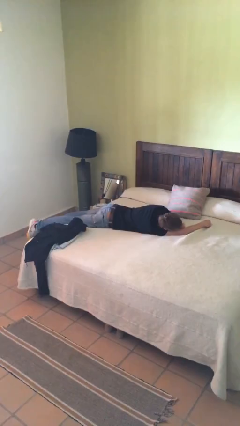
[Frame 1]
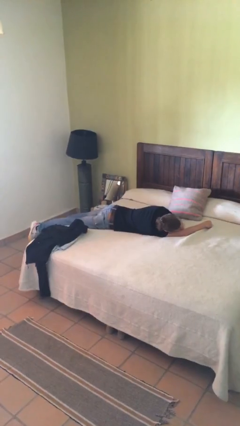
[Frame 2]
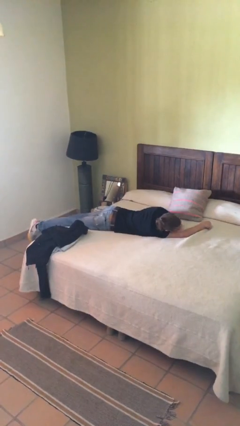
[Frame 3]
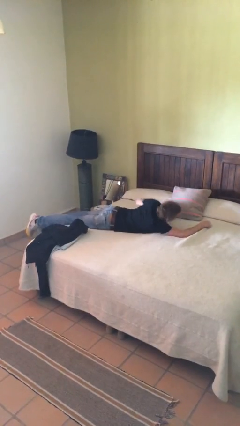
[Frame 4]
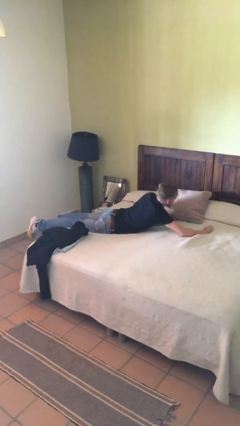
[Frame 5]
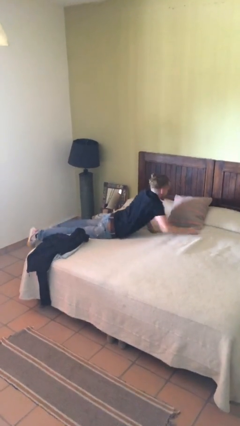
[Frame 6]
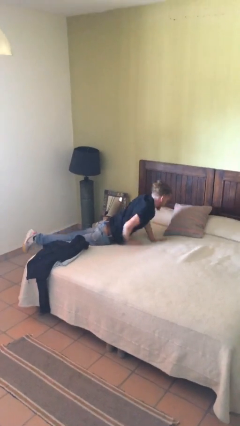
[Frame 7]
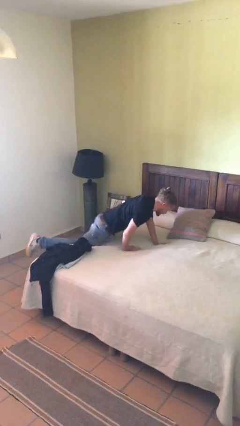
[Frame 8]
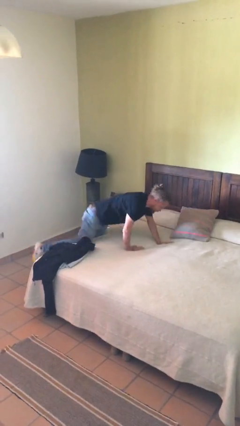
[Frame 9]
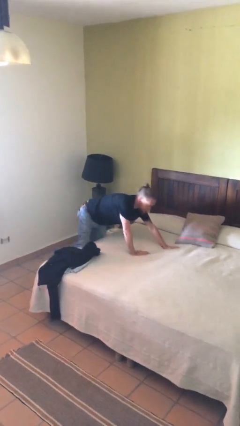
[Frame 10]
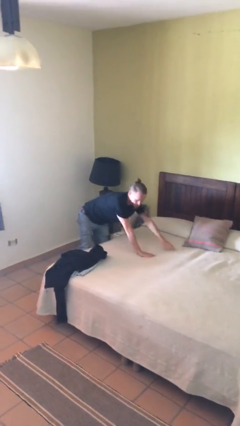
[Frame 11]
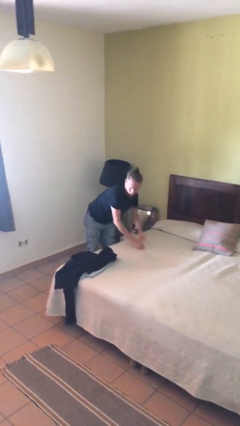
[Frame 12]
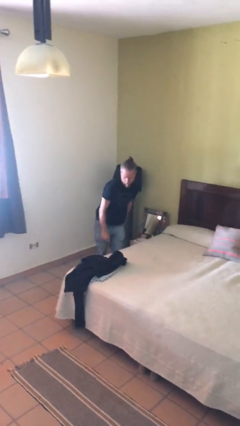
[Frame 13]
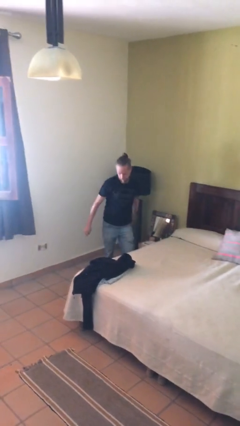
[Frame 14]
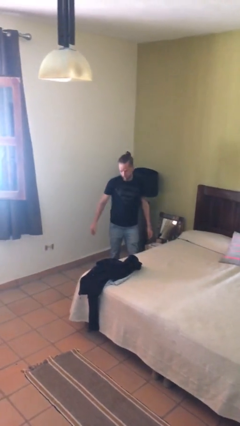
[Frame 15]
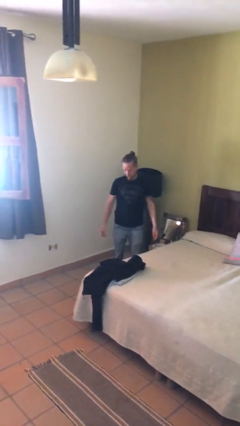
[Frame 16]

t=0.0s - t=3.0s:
person stands up

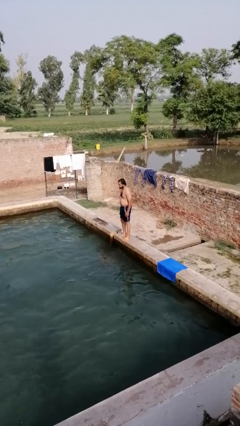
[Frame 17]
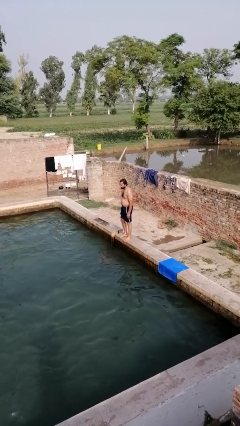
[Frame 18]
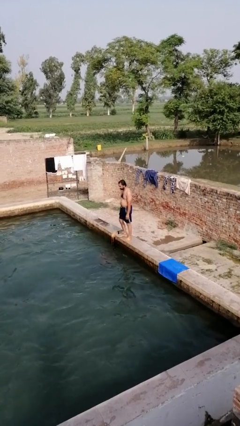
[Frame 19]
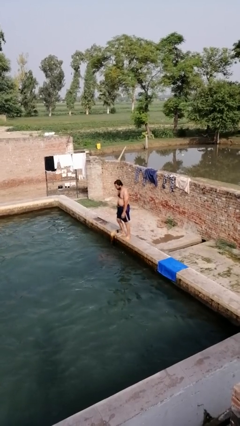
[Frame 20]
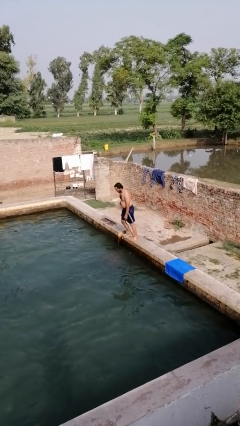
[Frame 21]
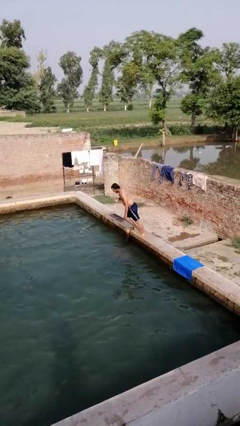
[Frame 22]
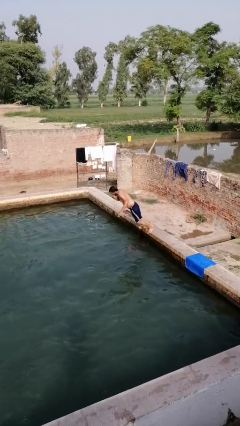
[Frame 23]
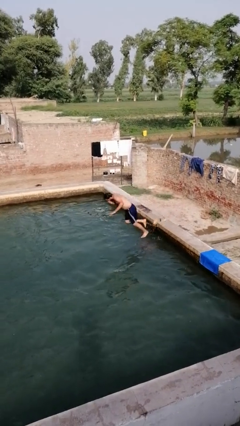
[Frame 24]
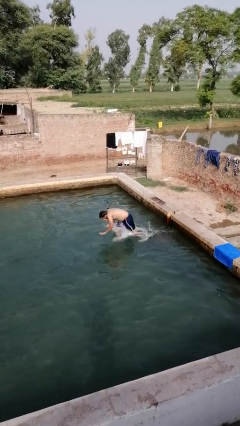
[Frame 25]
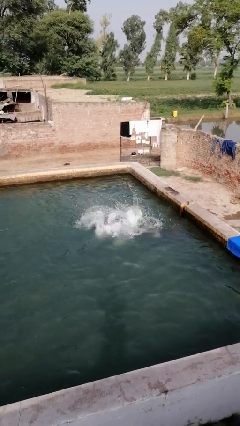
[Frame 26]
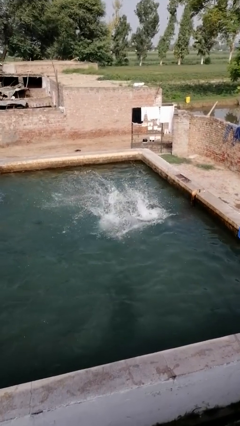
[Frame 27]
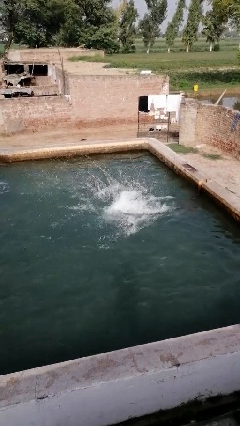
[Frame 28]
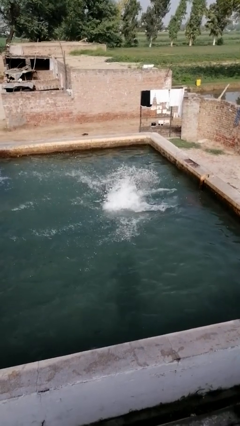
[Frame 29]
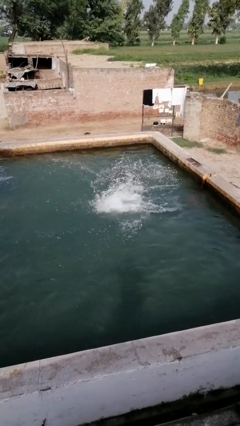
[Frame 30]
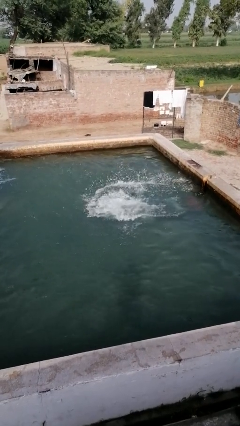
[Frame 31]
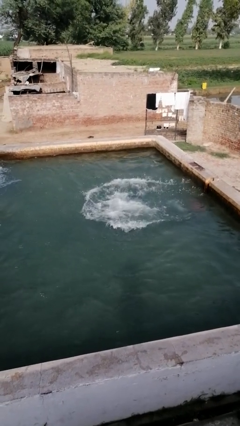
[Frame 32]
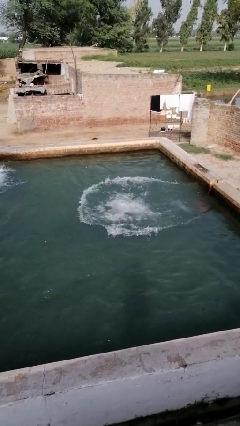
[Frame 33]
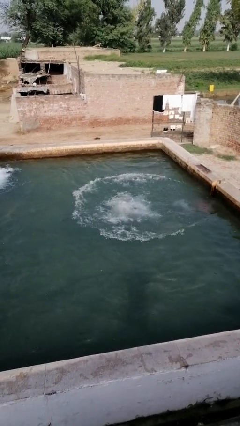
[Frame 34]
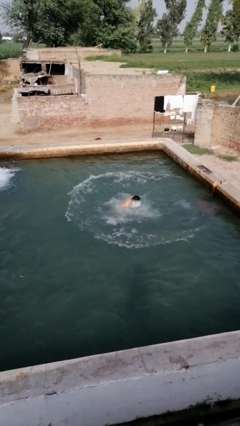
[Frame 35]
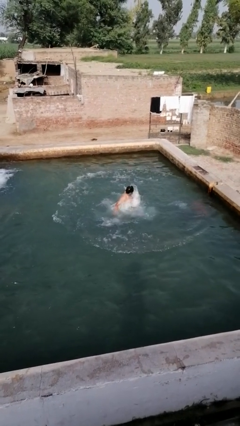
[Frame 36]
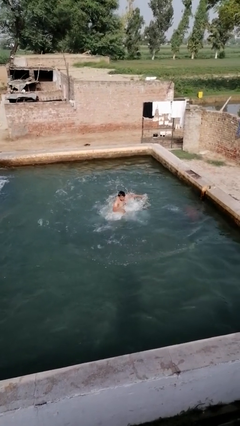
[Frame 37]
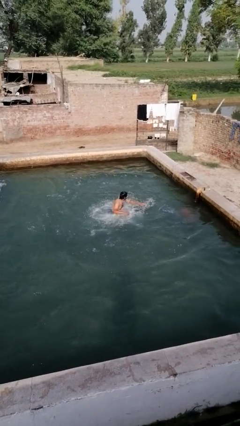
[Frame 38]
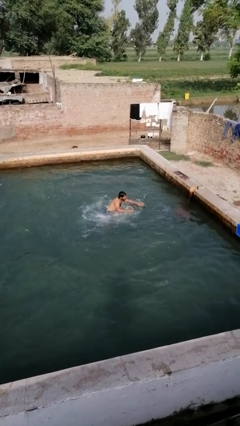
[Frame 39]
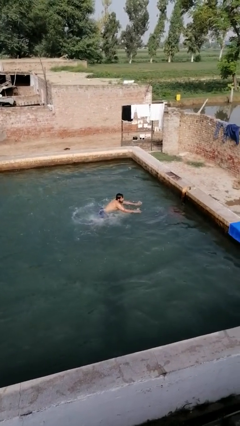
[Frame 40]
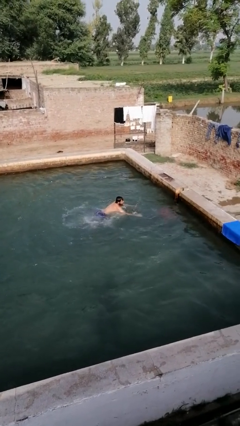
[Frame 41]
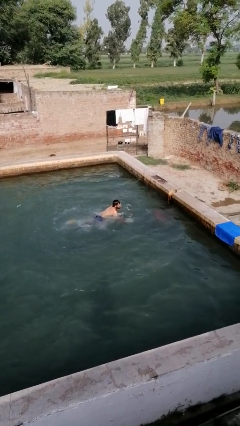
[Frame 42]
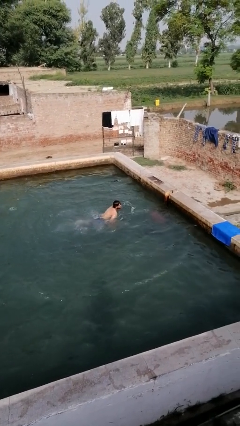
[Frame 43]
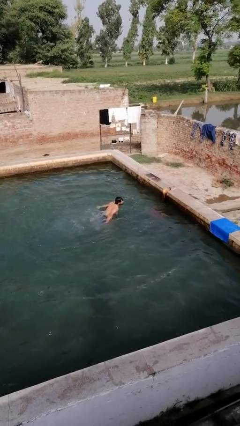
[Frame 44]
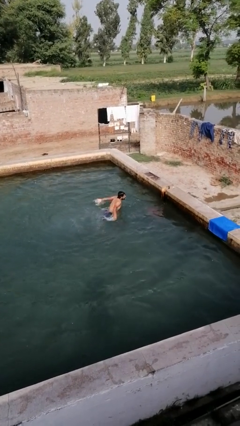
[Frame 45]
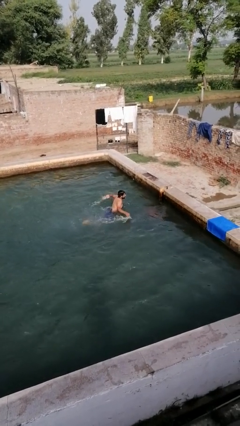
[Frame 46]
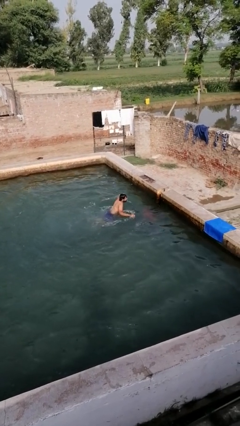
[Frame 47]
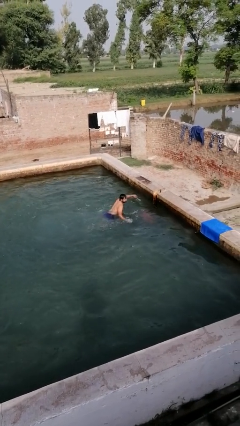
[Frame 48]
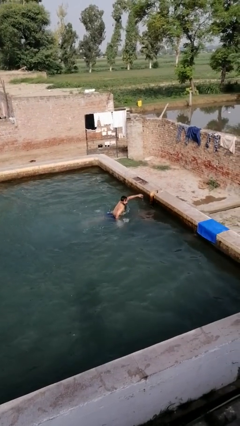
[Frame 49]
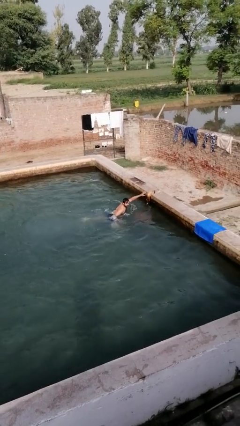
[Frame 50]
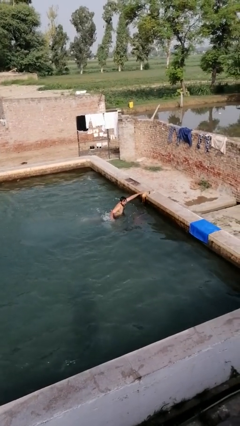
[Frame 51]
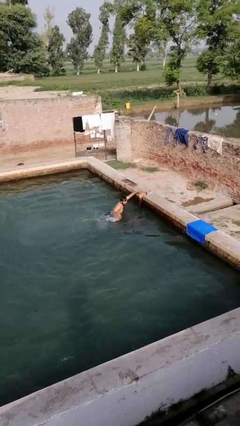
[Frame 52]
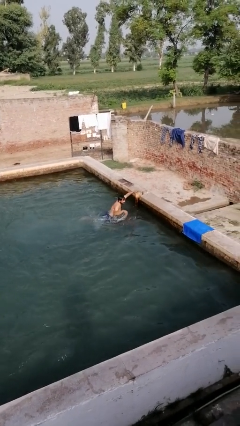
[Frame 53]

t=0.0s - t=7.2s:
person jumps into pool

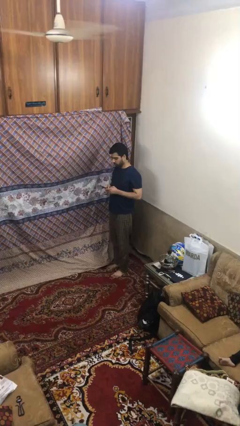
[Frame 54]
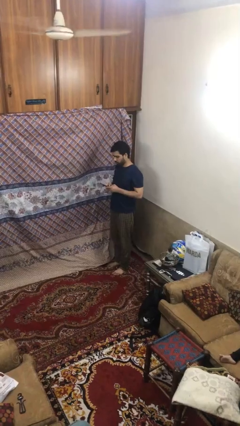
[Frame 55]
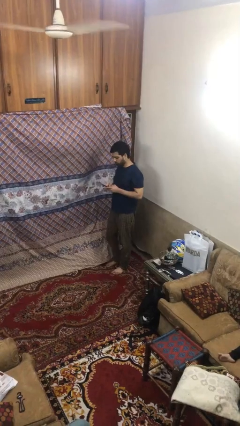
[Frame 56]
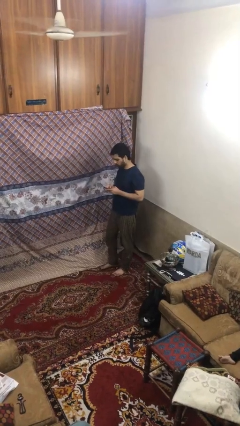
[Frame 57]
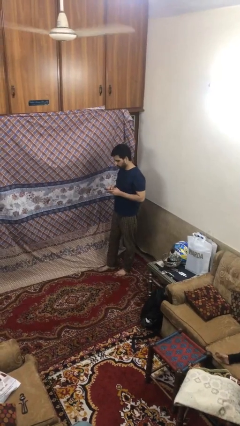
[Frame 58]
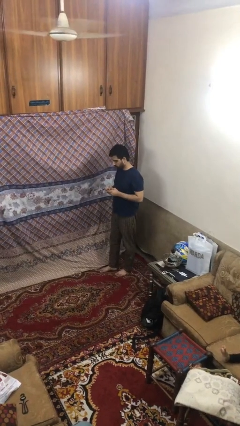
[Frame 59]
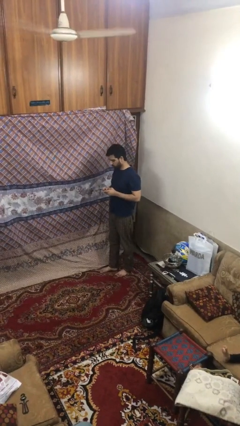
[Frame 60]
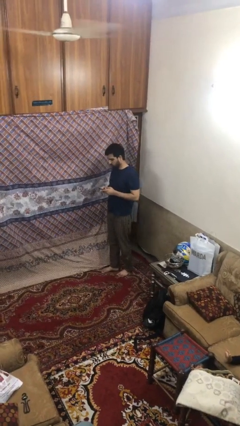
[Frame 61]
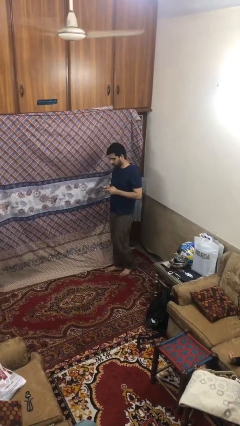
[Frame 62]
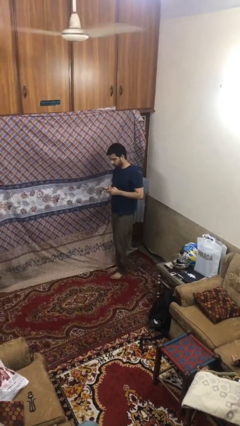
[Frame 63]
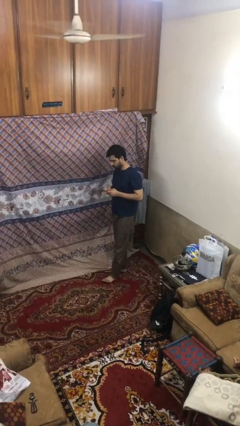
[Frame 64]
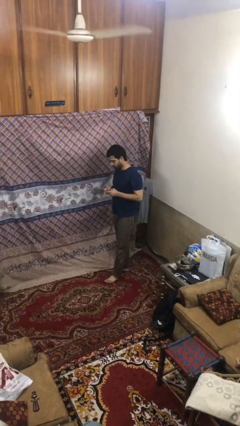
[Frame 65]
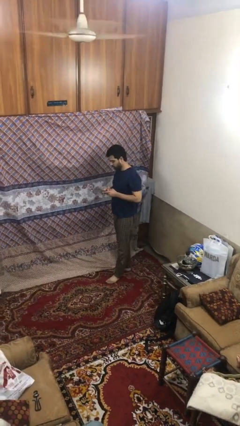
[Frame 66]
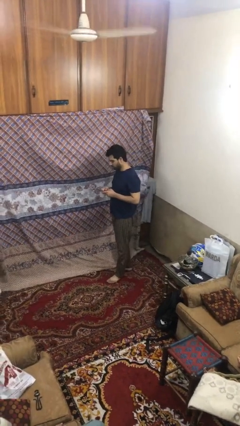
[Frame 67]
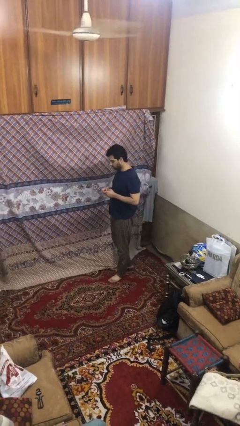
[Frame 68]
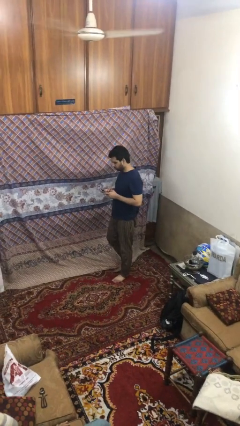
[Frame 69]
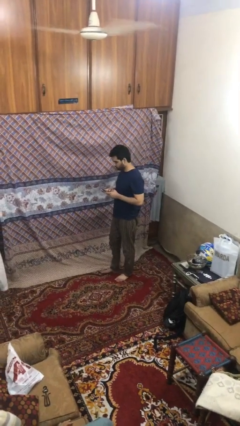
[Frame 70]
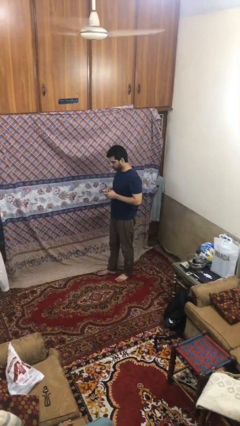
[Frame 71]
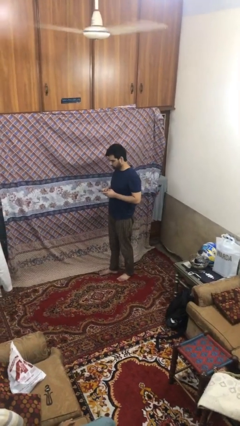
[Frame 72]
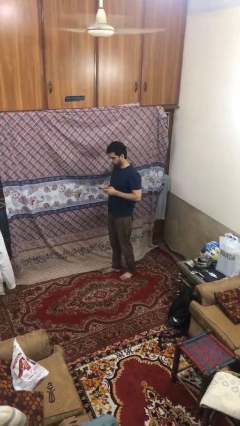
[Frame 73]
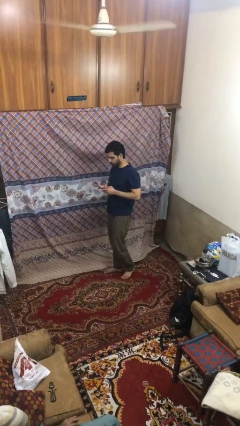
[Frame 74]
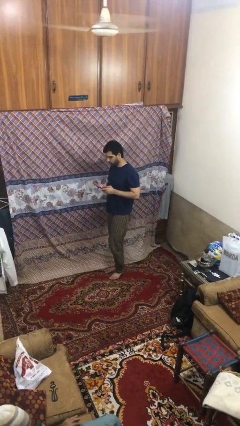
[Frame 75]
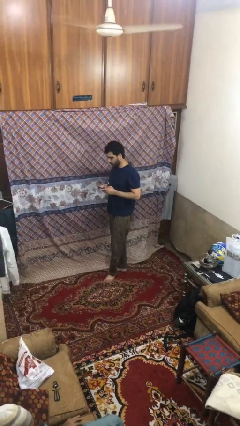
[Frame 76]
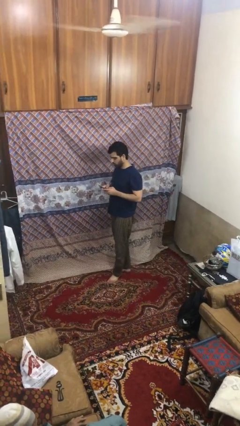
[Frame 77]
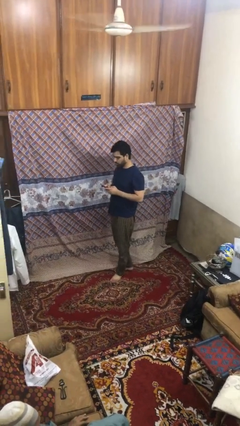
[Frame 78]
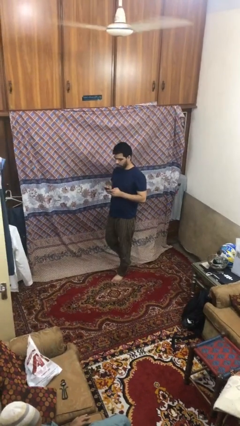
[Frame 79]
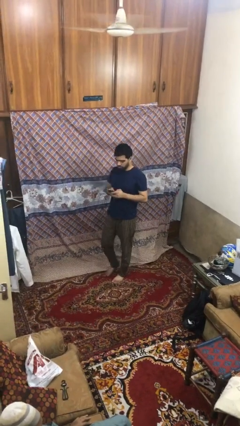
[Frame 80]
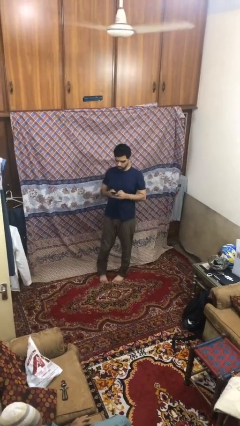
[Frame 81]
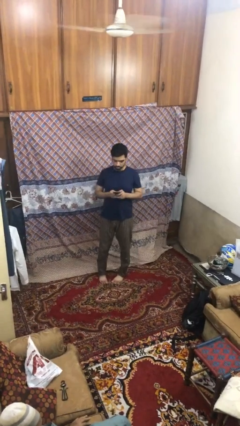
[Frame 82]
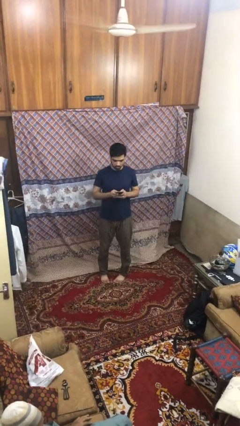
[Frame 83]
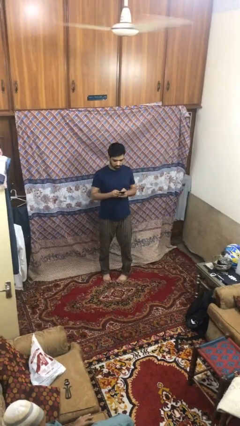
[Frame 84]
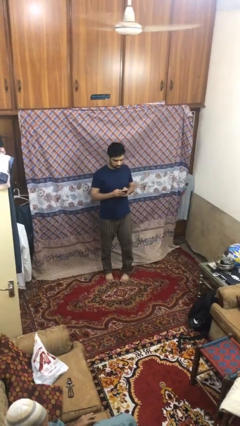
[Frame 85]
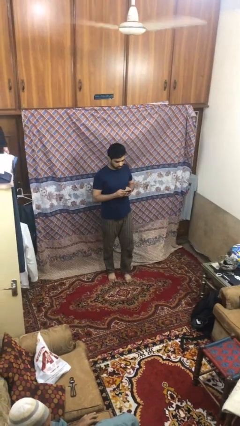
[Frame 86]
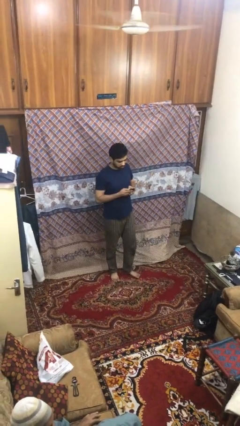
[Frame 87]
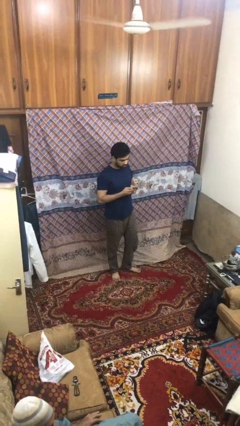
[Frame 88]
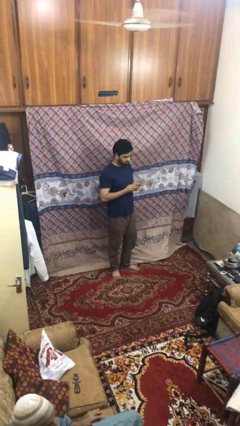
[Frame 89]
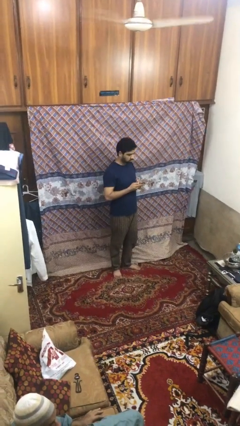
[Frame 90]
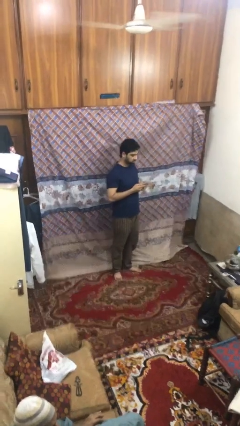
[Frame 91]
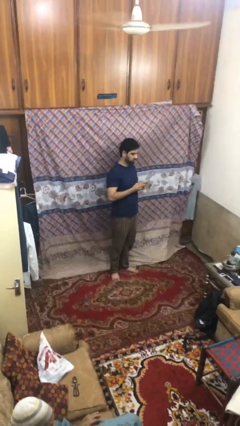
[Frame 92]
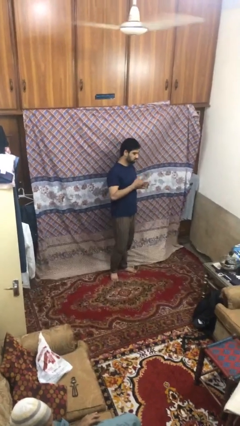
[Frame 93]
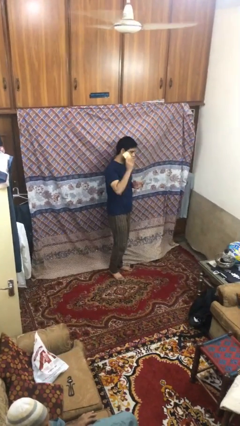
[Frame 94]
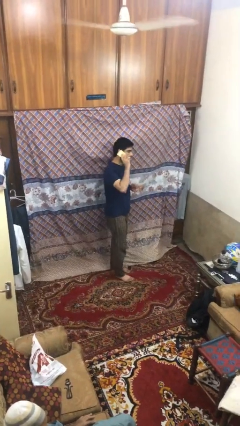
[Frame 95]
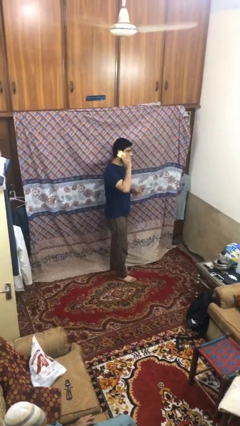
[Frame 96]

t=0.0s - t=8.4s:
person texts on phone
